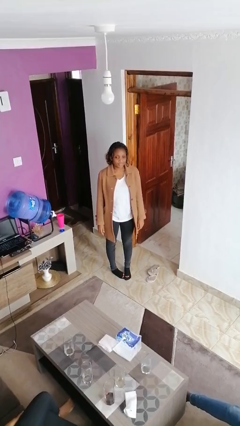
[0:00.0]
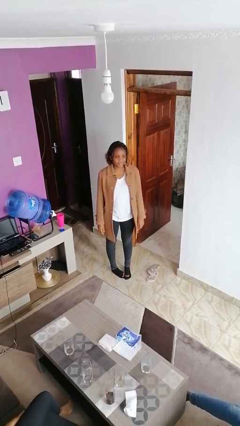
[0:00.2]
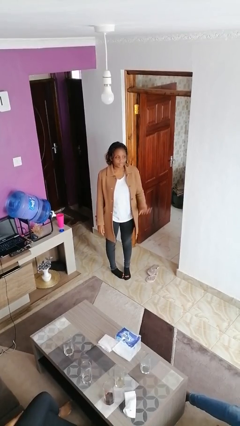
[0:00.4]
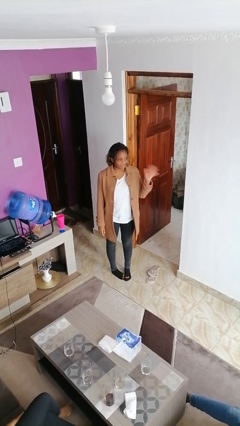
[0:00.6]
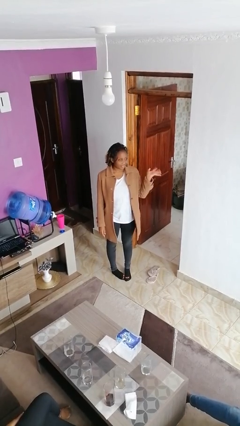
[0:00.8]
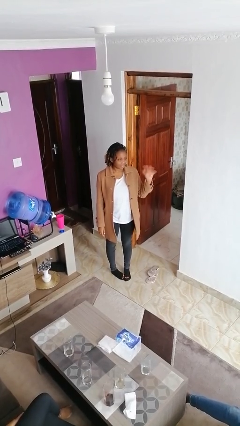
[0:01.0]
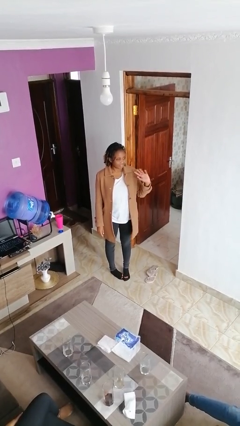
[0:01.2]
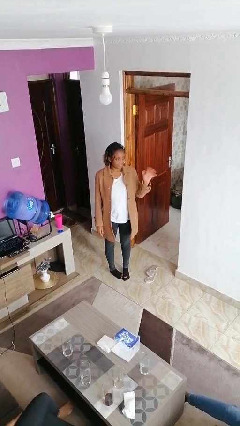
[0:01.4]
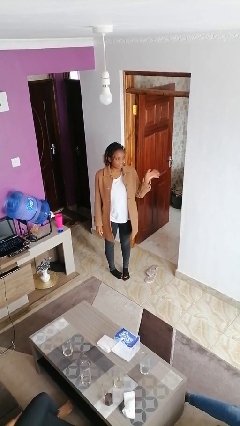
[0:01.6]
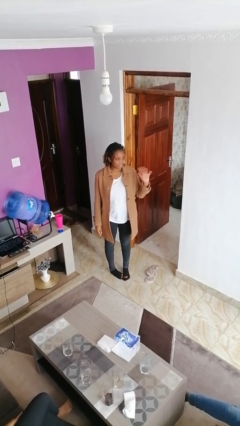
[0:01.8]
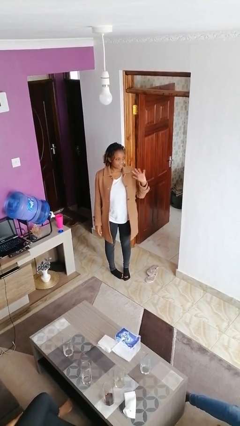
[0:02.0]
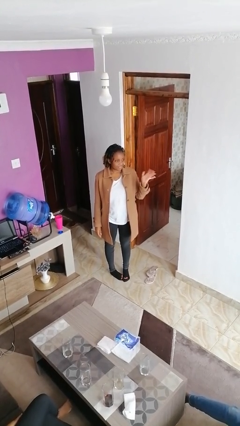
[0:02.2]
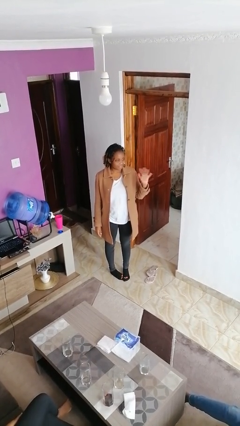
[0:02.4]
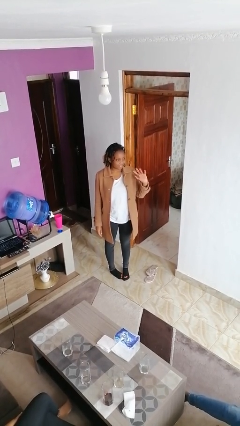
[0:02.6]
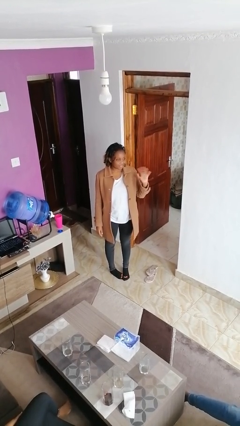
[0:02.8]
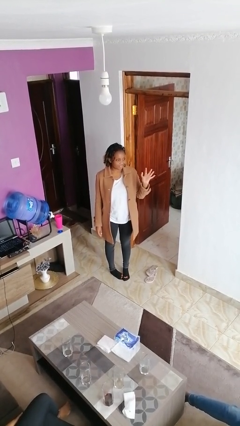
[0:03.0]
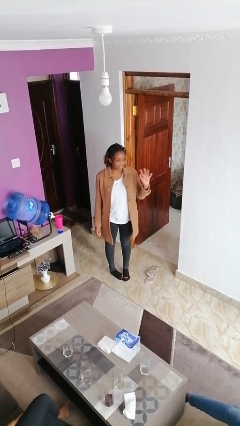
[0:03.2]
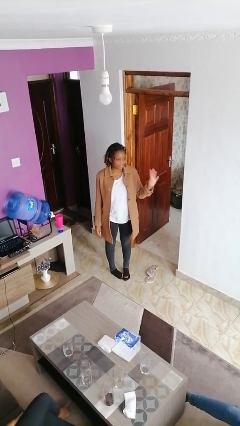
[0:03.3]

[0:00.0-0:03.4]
person waves at person

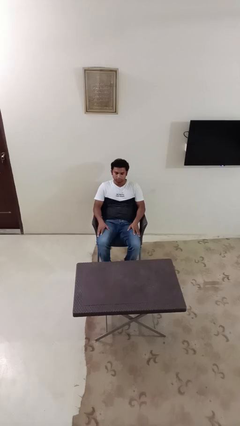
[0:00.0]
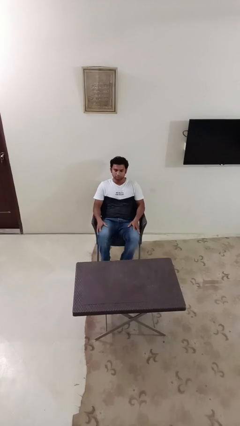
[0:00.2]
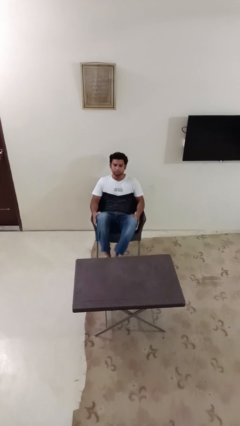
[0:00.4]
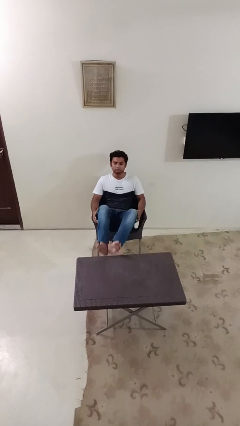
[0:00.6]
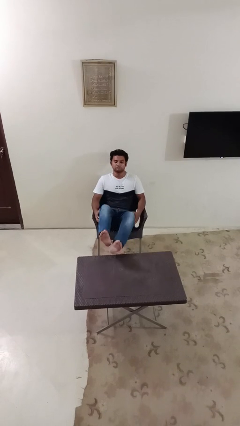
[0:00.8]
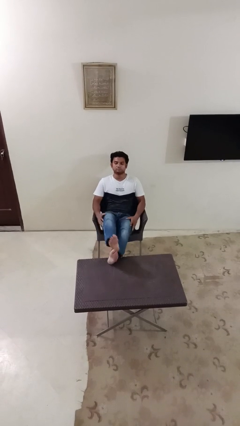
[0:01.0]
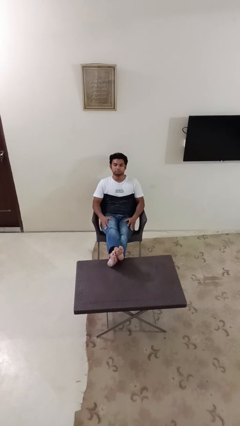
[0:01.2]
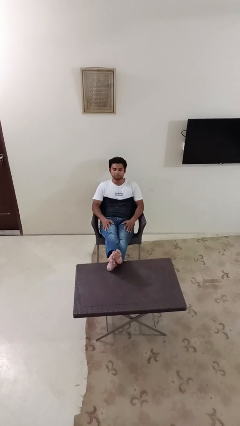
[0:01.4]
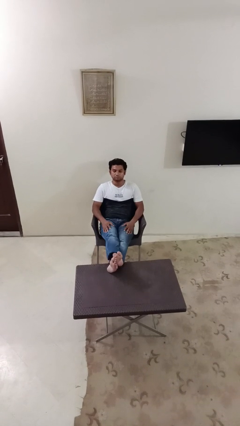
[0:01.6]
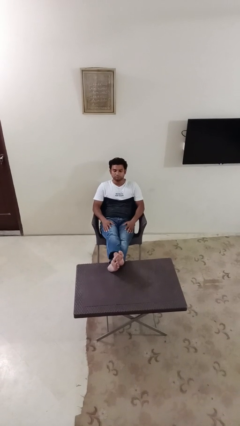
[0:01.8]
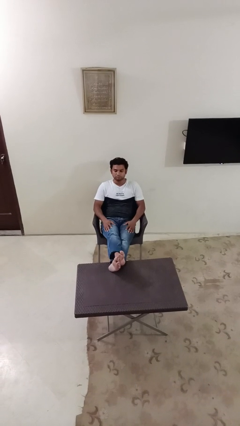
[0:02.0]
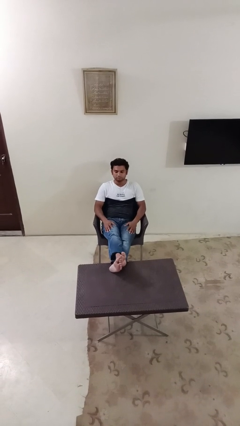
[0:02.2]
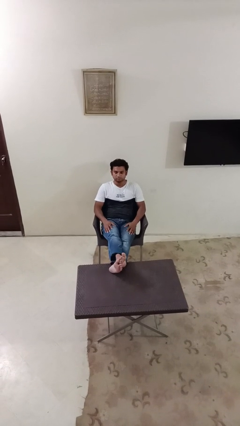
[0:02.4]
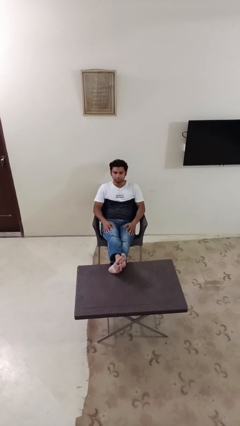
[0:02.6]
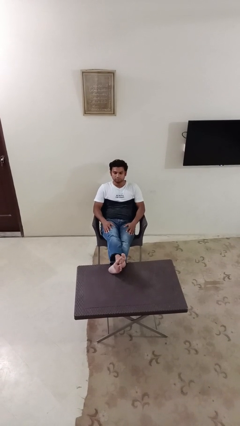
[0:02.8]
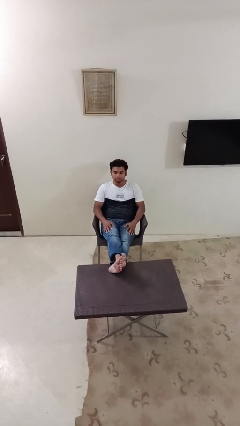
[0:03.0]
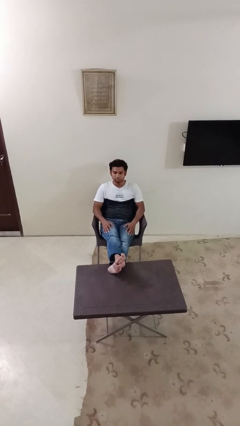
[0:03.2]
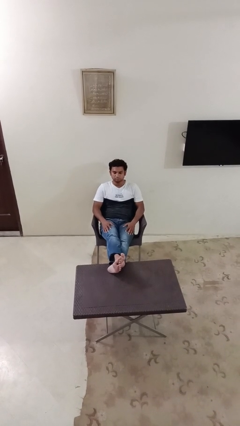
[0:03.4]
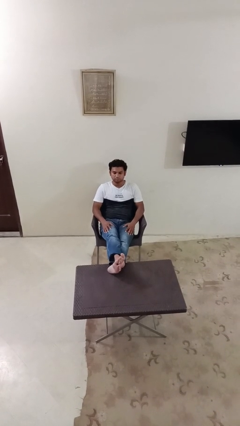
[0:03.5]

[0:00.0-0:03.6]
person puts feet up

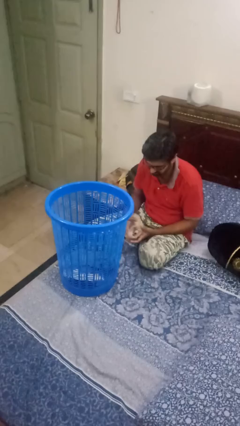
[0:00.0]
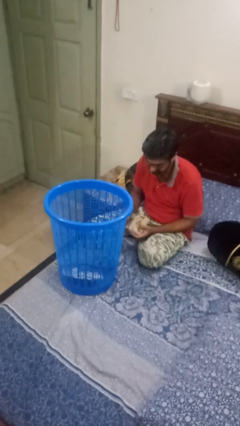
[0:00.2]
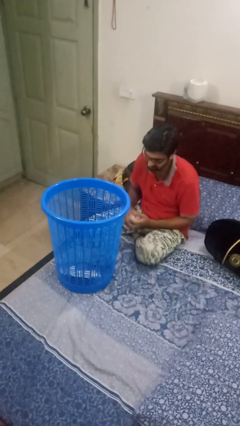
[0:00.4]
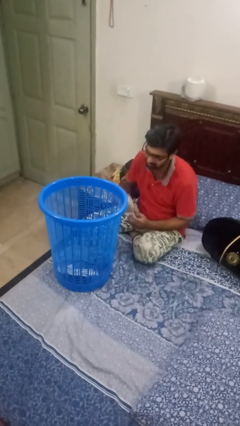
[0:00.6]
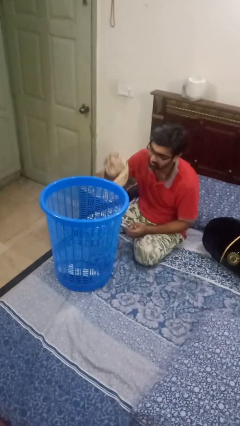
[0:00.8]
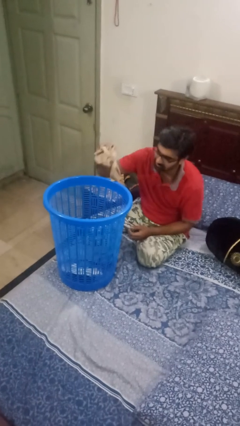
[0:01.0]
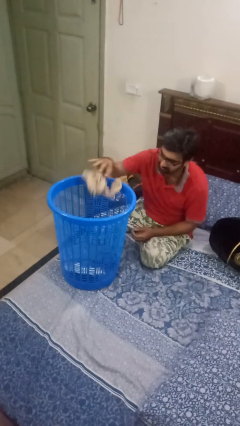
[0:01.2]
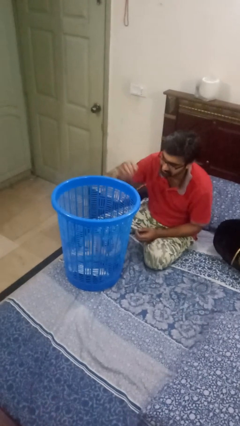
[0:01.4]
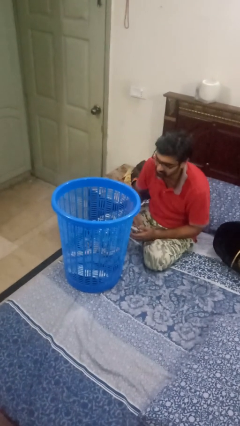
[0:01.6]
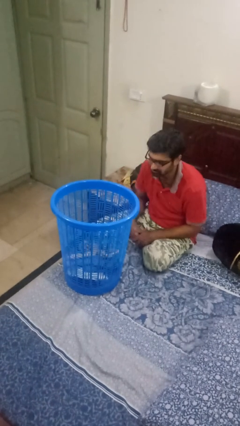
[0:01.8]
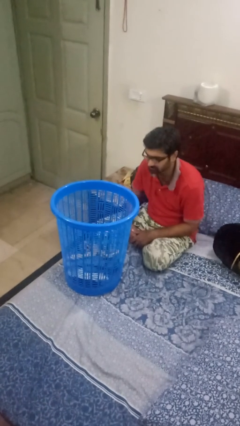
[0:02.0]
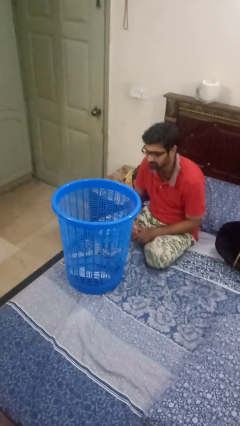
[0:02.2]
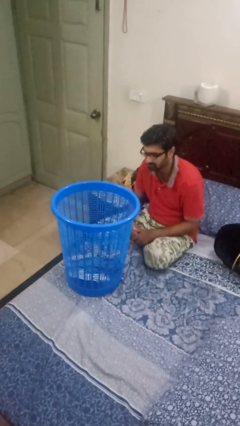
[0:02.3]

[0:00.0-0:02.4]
person puts object into basket

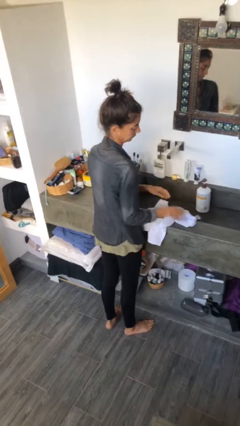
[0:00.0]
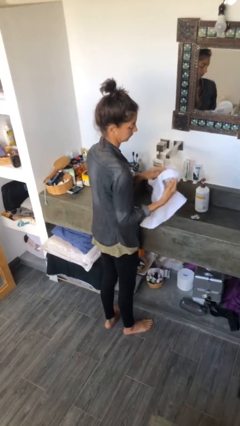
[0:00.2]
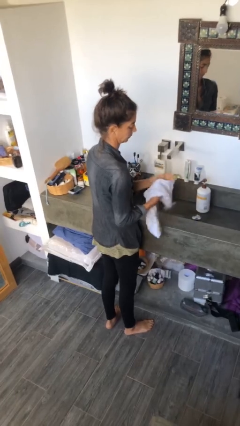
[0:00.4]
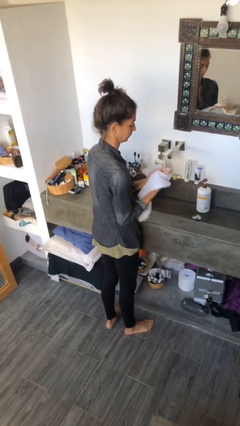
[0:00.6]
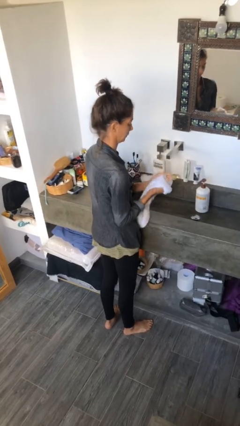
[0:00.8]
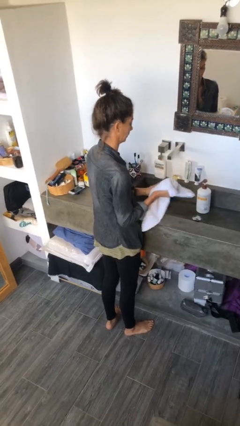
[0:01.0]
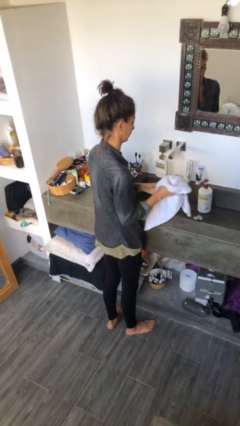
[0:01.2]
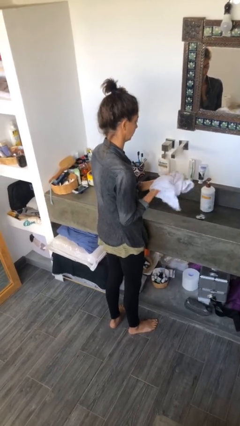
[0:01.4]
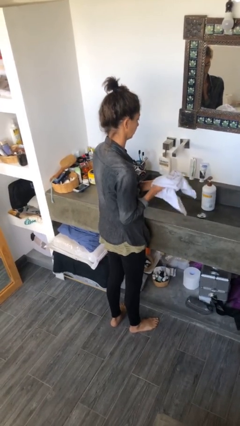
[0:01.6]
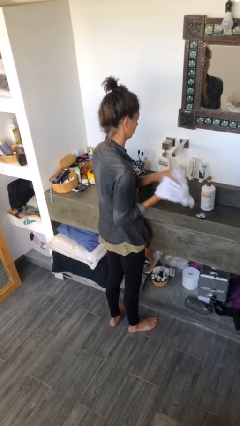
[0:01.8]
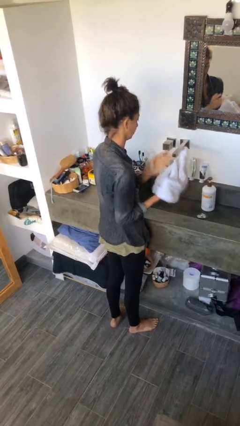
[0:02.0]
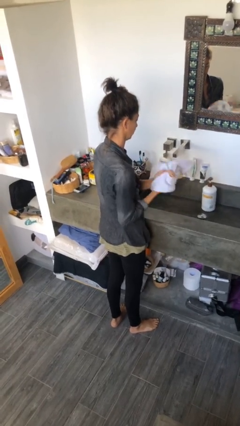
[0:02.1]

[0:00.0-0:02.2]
person dries hands with towel

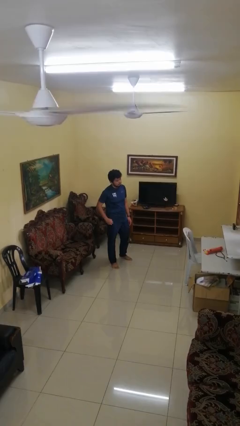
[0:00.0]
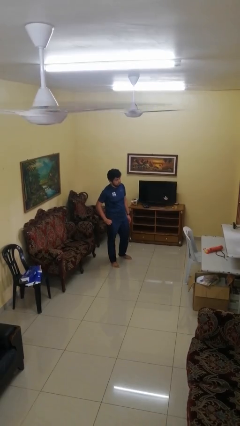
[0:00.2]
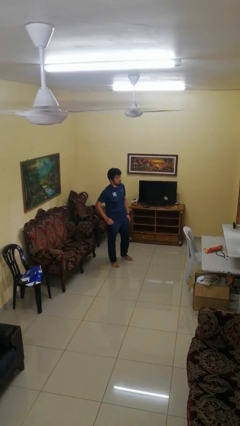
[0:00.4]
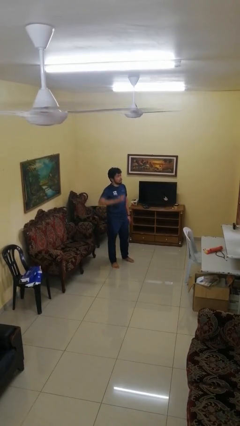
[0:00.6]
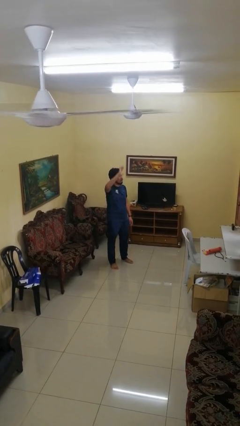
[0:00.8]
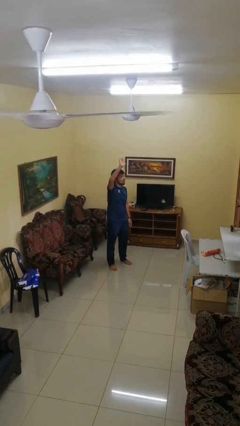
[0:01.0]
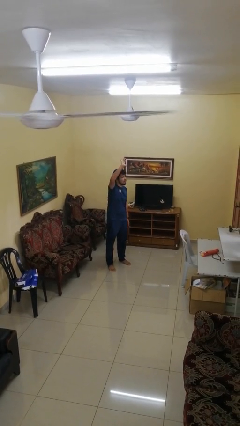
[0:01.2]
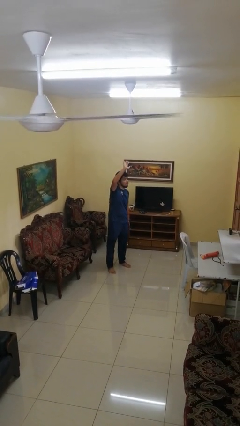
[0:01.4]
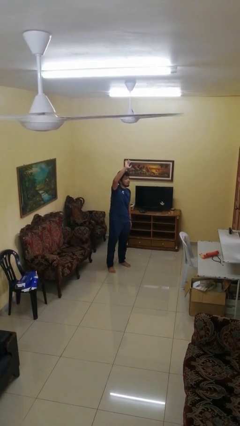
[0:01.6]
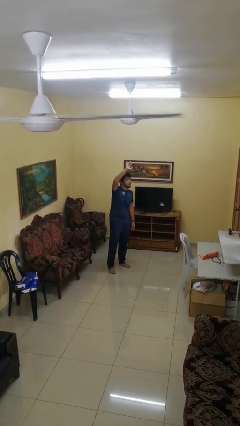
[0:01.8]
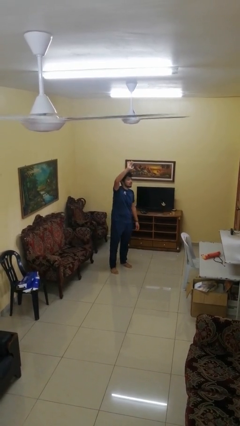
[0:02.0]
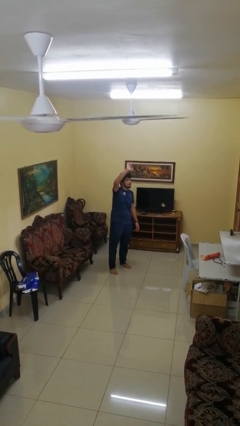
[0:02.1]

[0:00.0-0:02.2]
person gestures raise hand

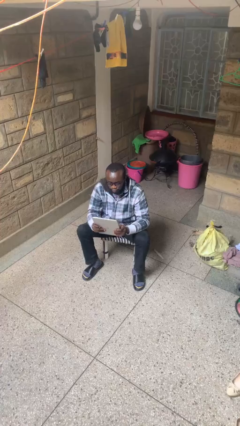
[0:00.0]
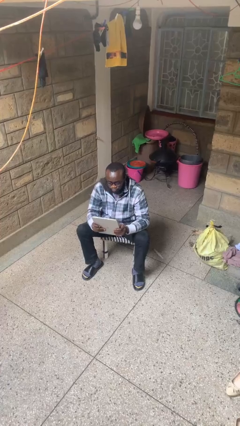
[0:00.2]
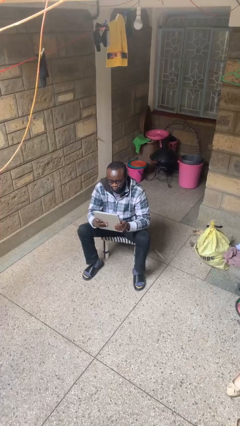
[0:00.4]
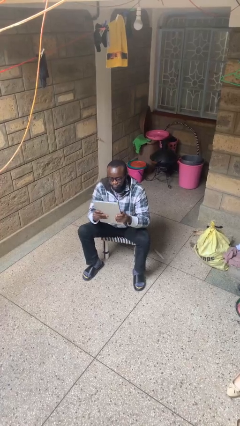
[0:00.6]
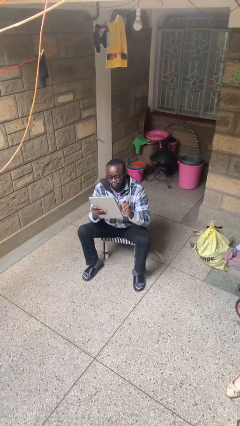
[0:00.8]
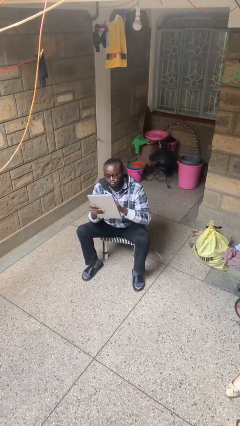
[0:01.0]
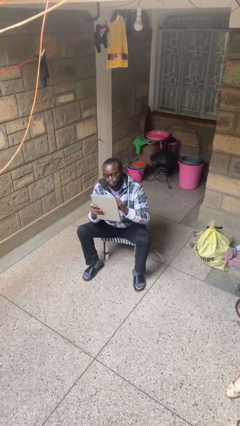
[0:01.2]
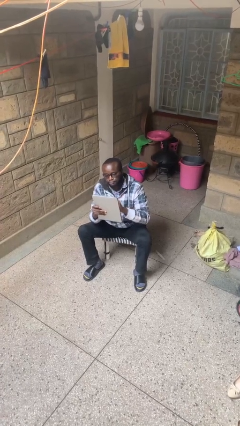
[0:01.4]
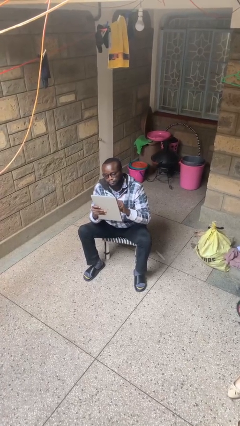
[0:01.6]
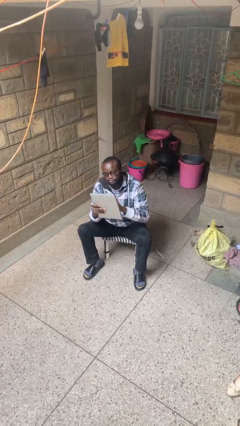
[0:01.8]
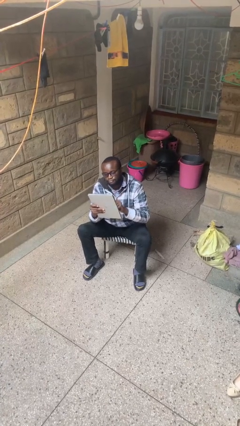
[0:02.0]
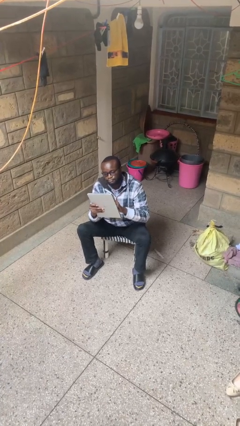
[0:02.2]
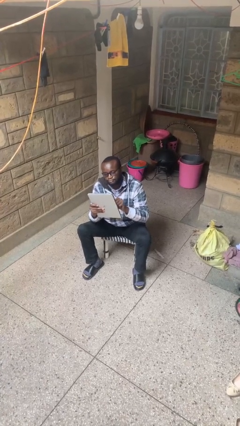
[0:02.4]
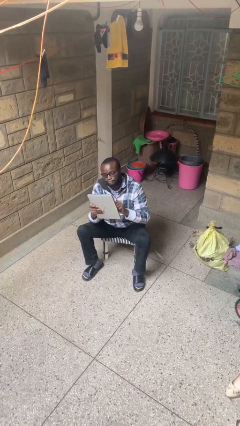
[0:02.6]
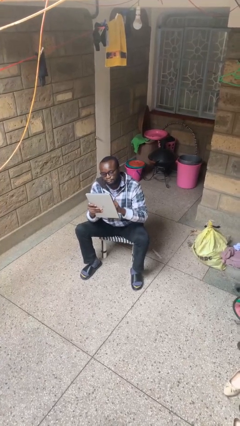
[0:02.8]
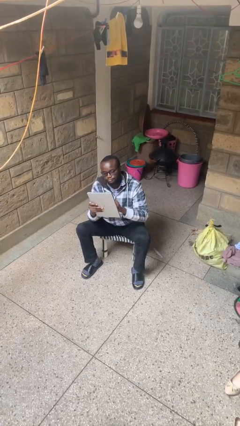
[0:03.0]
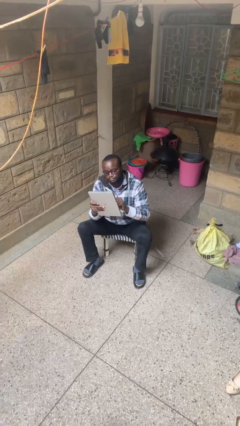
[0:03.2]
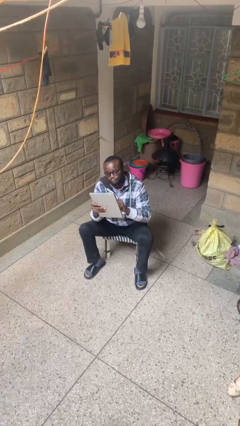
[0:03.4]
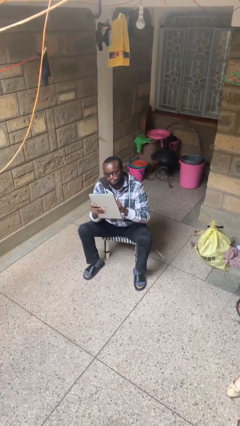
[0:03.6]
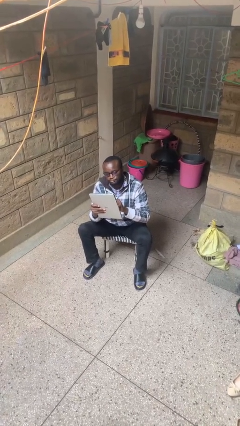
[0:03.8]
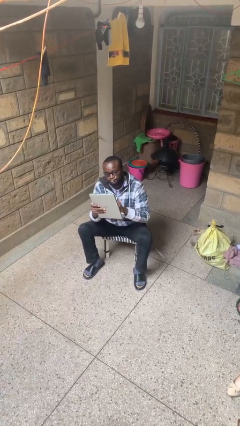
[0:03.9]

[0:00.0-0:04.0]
person interacts with tablet
